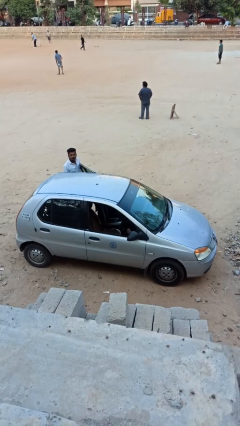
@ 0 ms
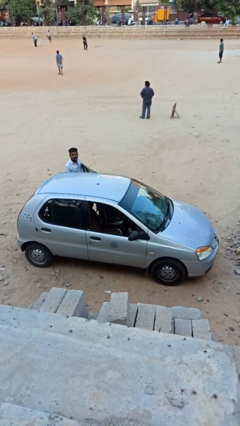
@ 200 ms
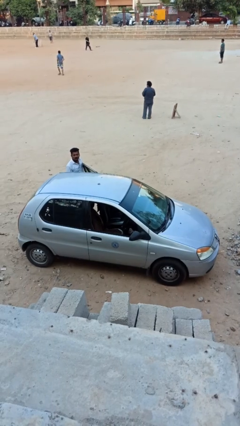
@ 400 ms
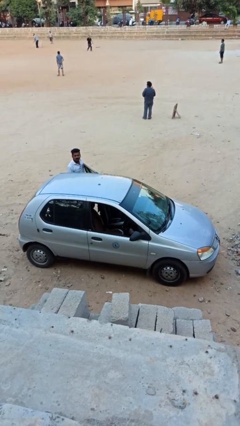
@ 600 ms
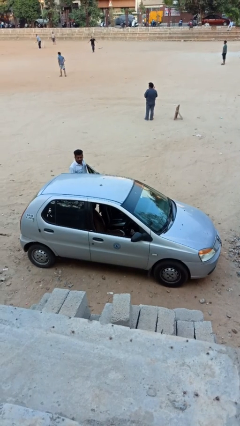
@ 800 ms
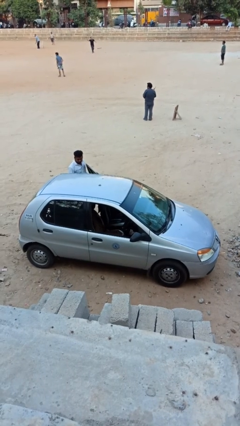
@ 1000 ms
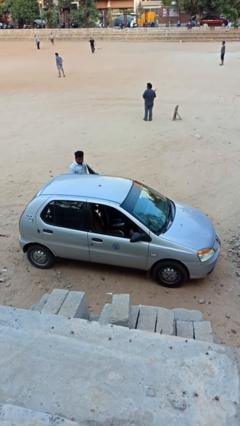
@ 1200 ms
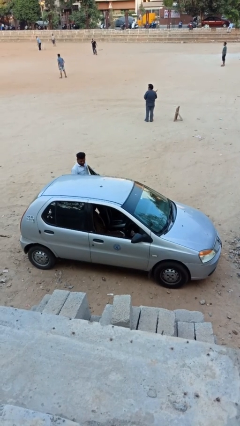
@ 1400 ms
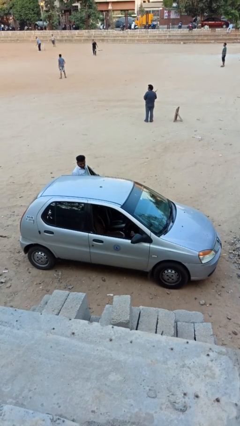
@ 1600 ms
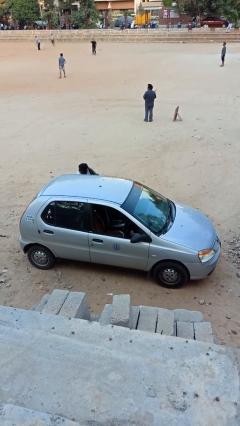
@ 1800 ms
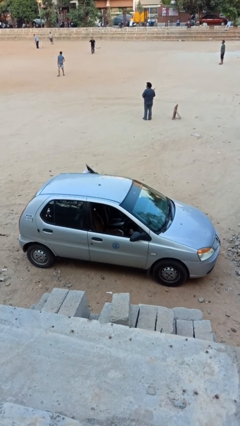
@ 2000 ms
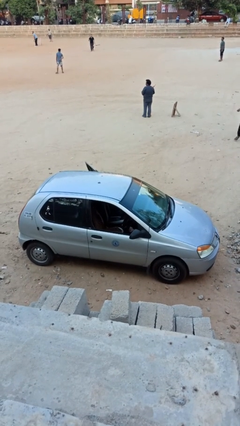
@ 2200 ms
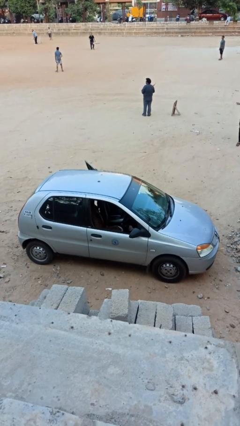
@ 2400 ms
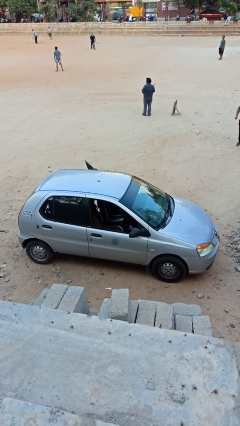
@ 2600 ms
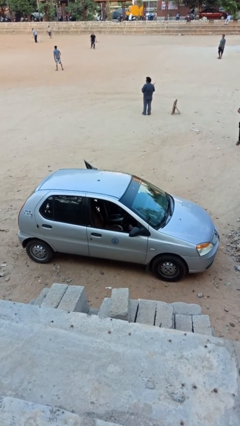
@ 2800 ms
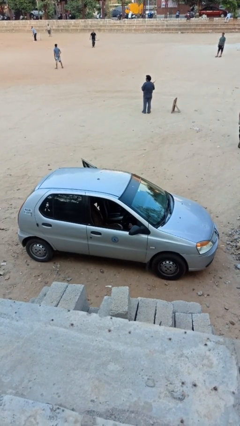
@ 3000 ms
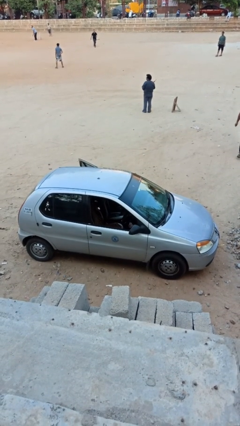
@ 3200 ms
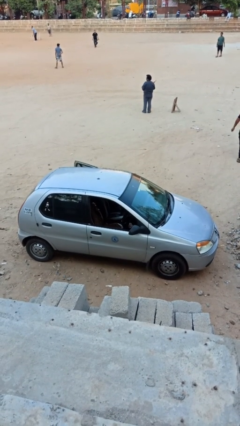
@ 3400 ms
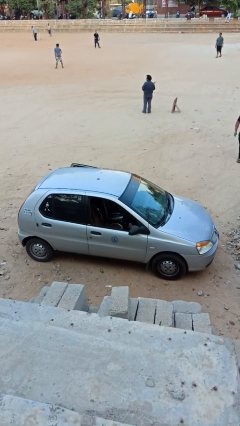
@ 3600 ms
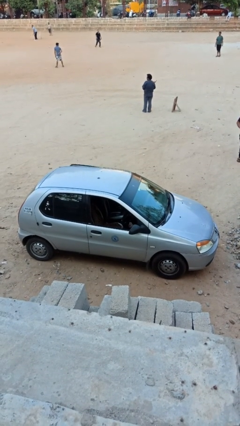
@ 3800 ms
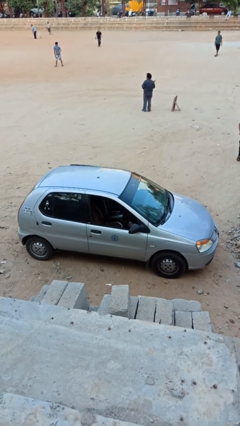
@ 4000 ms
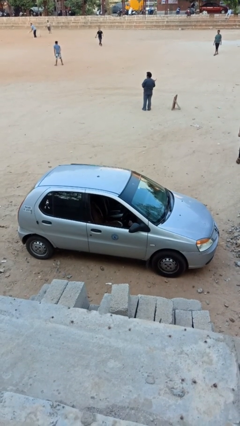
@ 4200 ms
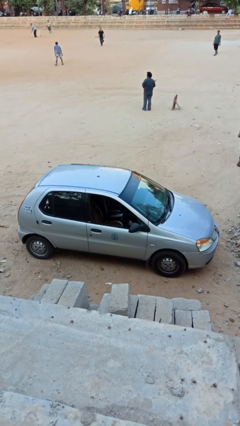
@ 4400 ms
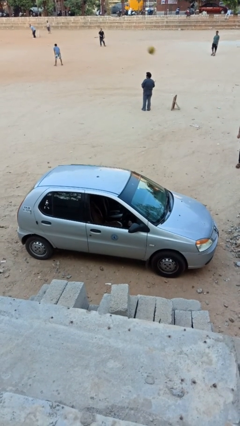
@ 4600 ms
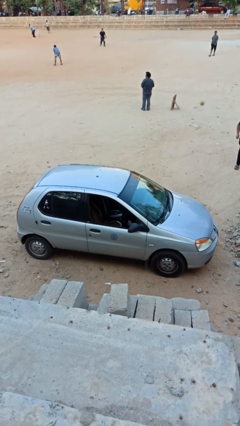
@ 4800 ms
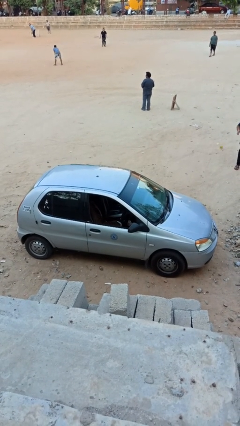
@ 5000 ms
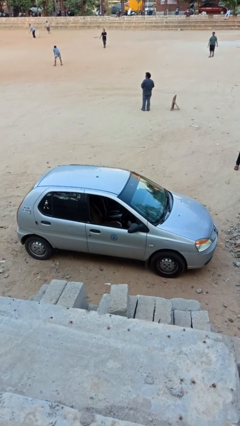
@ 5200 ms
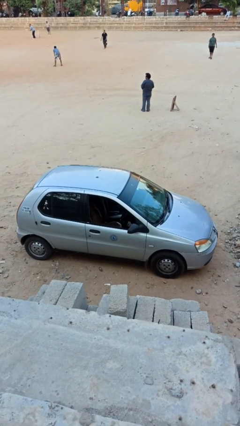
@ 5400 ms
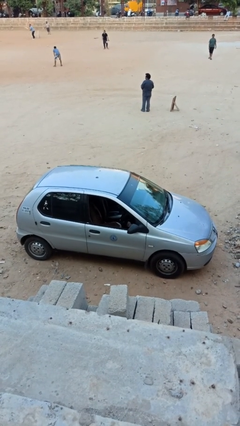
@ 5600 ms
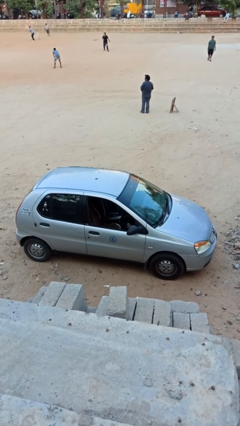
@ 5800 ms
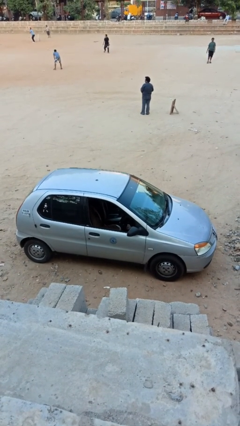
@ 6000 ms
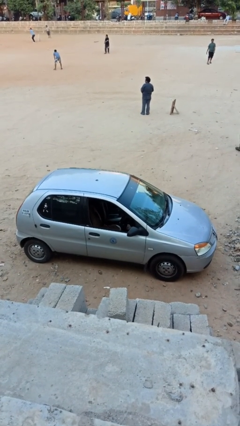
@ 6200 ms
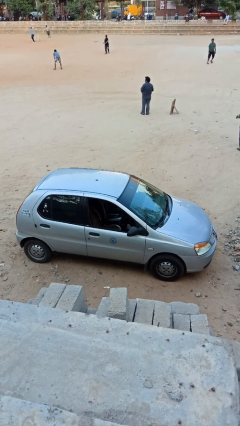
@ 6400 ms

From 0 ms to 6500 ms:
car picks up person

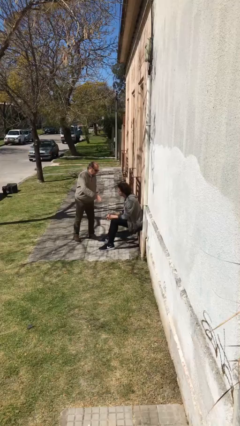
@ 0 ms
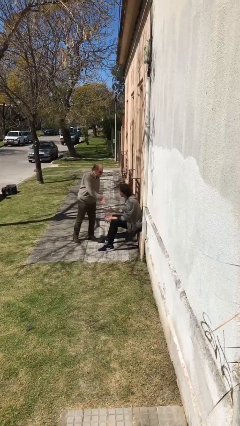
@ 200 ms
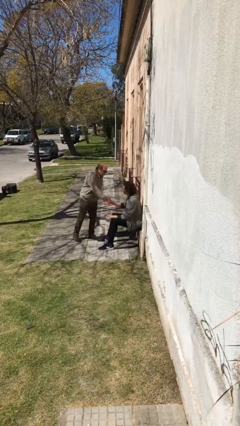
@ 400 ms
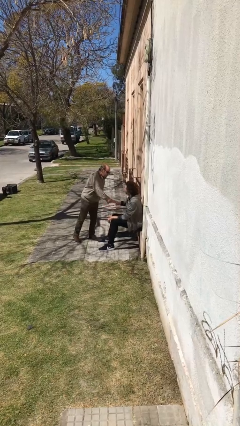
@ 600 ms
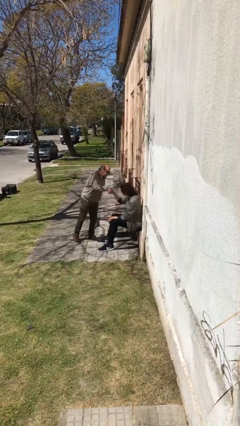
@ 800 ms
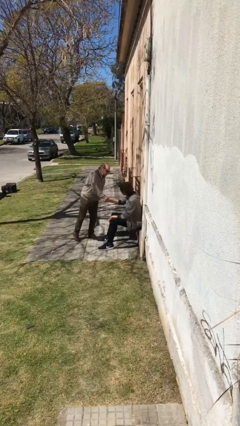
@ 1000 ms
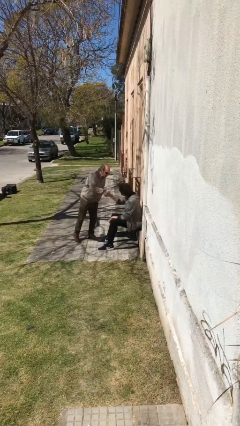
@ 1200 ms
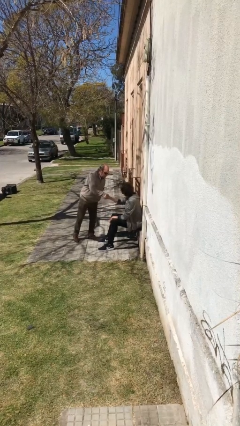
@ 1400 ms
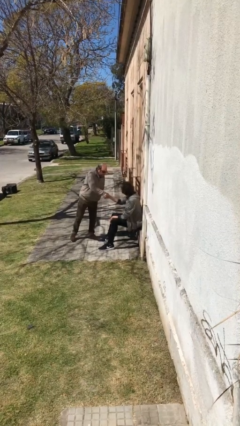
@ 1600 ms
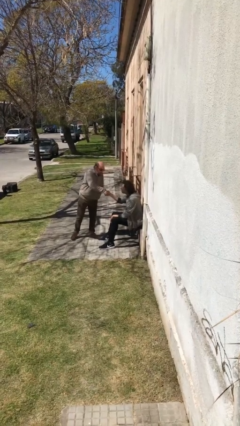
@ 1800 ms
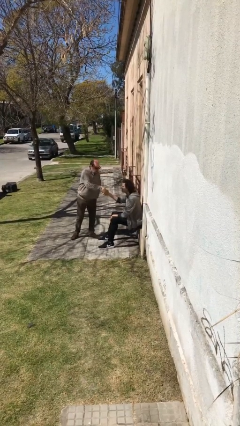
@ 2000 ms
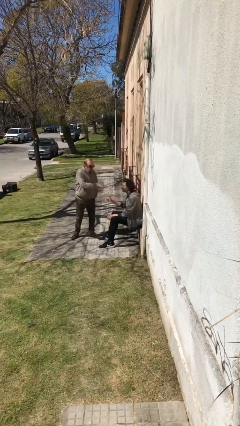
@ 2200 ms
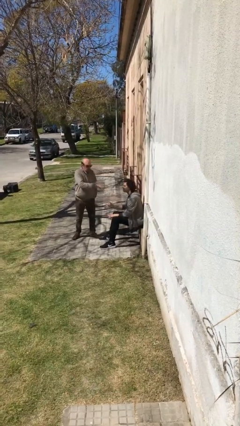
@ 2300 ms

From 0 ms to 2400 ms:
person shakes hand

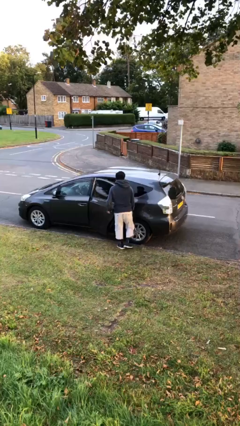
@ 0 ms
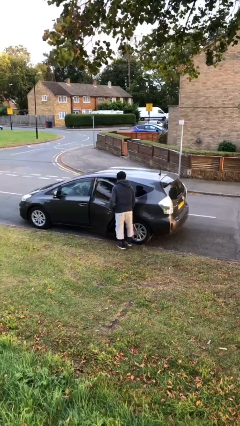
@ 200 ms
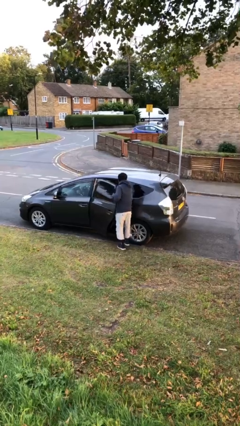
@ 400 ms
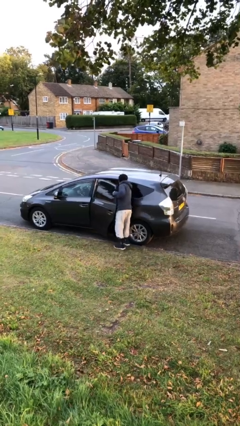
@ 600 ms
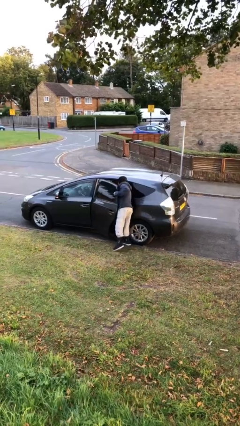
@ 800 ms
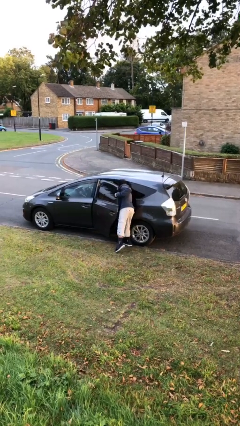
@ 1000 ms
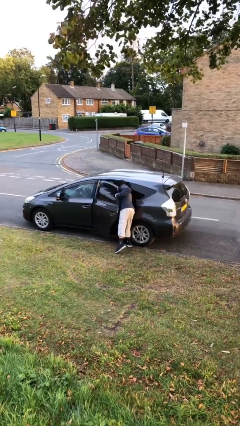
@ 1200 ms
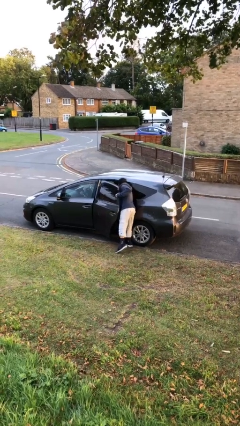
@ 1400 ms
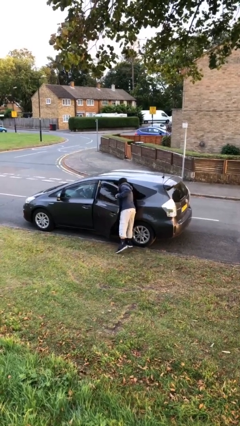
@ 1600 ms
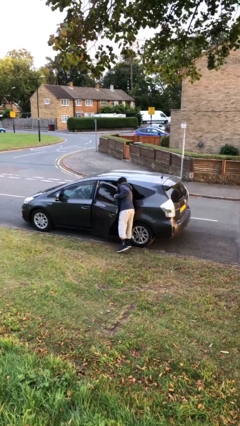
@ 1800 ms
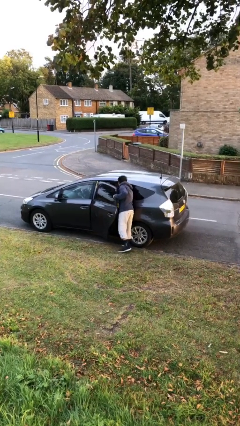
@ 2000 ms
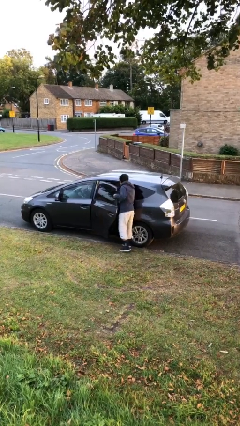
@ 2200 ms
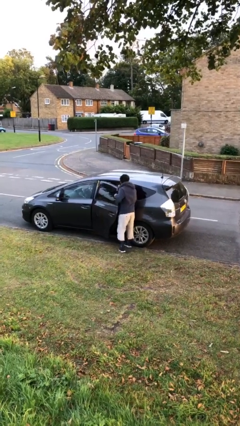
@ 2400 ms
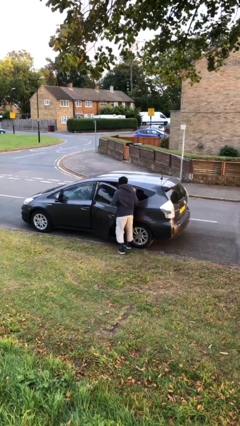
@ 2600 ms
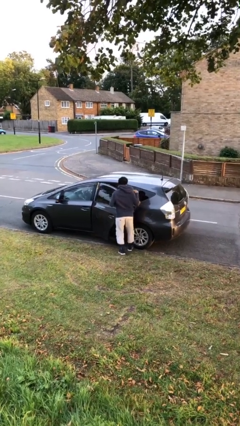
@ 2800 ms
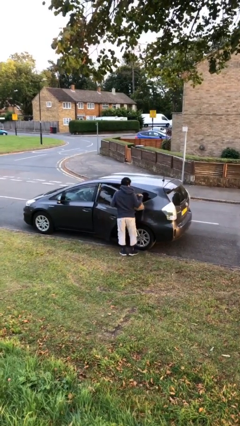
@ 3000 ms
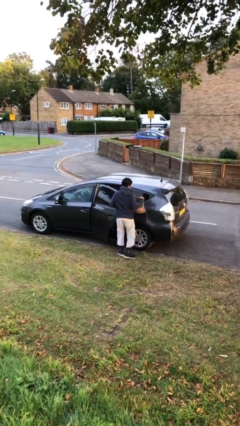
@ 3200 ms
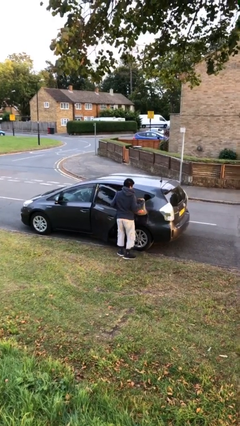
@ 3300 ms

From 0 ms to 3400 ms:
person unloads car

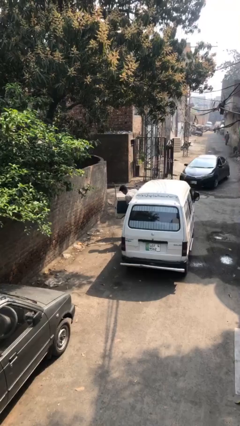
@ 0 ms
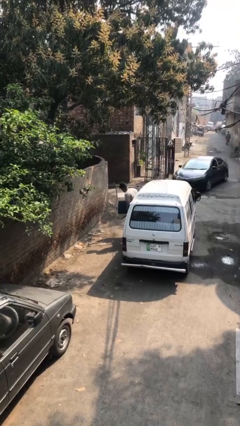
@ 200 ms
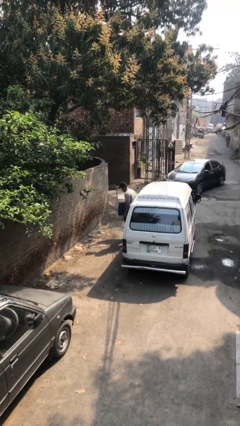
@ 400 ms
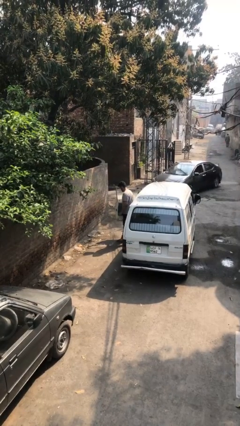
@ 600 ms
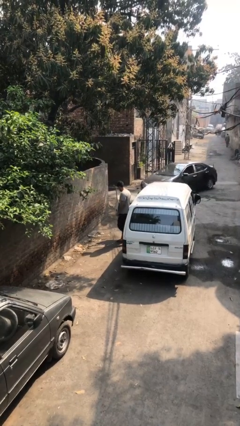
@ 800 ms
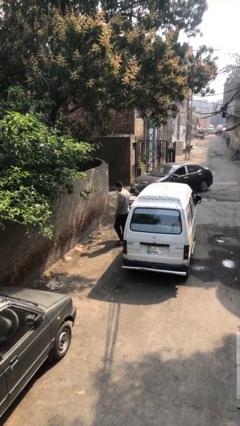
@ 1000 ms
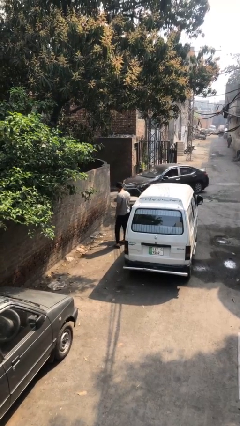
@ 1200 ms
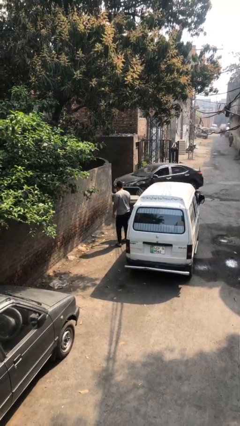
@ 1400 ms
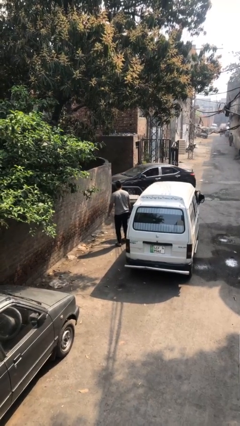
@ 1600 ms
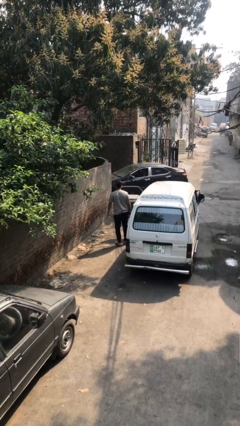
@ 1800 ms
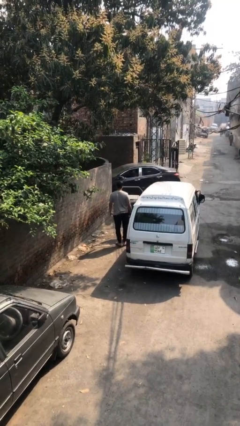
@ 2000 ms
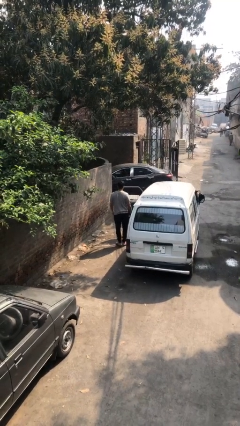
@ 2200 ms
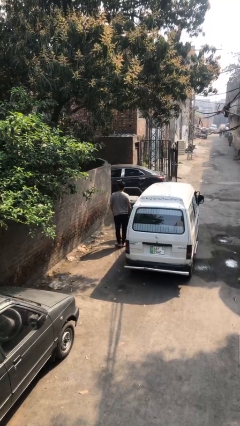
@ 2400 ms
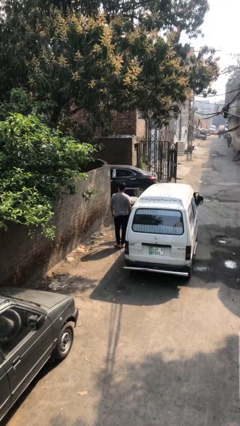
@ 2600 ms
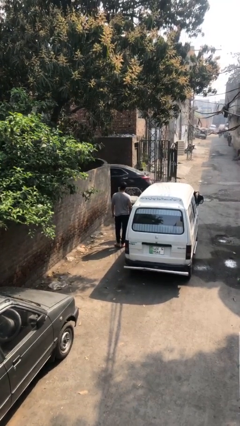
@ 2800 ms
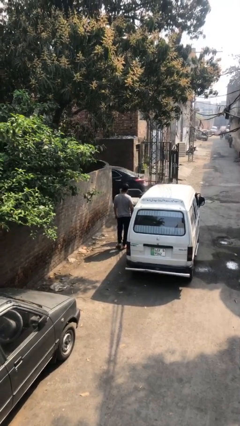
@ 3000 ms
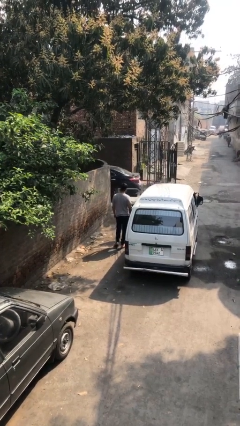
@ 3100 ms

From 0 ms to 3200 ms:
person exits car

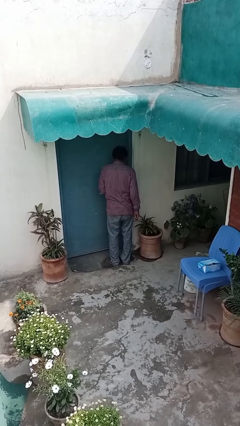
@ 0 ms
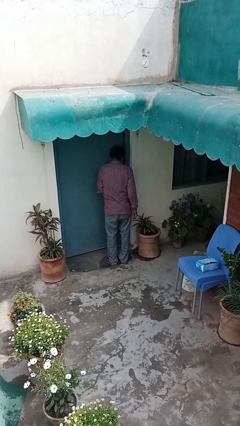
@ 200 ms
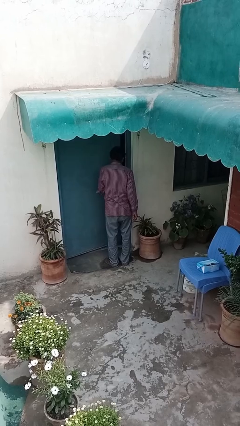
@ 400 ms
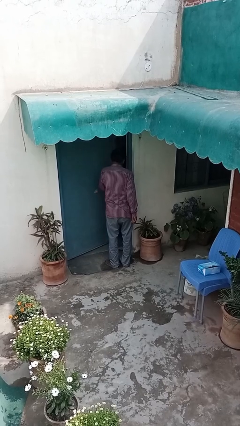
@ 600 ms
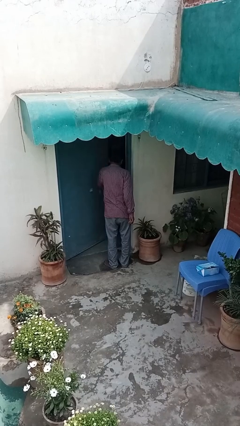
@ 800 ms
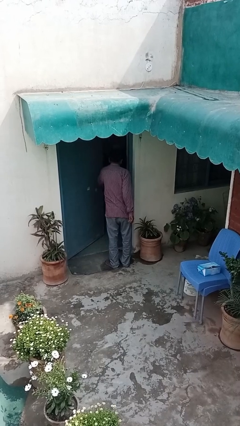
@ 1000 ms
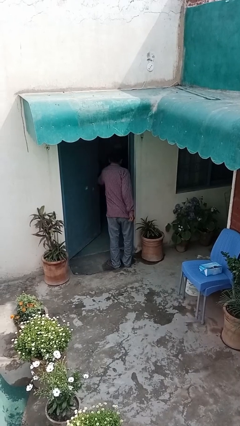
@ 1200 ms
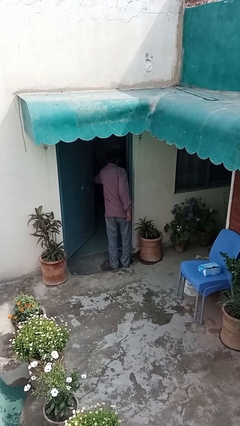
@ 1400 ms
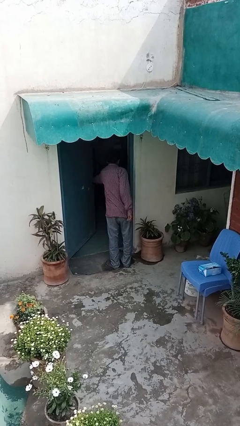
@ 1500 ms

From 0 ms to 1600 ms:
person opens facility door

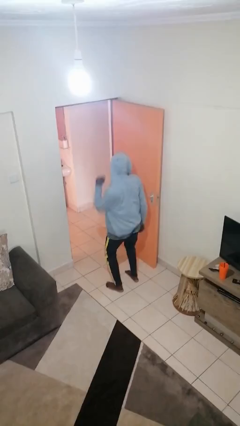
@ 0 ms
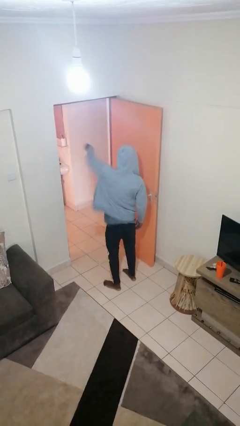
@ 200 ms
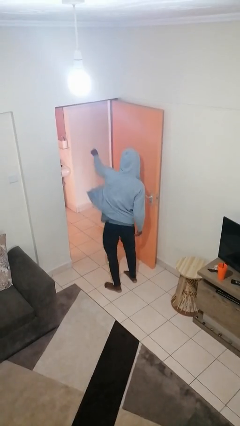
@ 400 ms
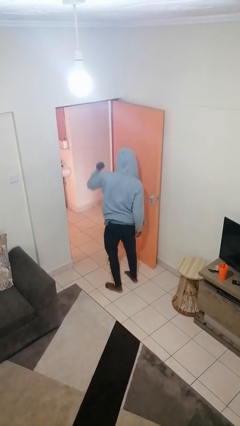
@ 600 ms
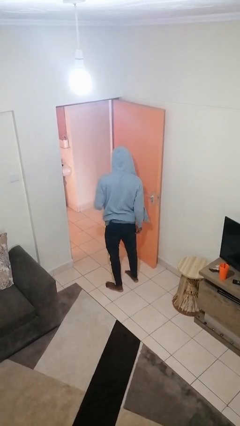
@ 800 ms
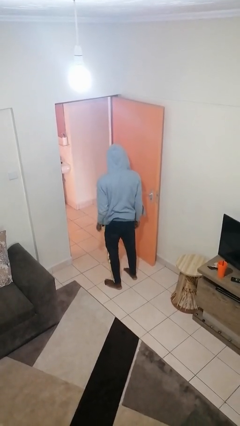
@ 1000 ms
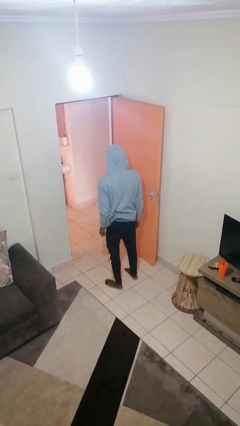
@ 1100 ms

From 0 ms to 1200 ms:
person punches
